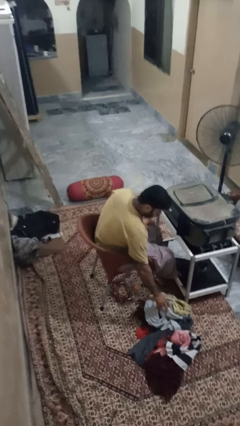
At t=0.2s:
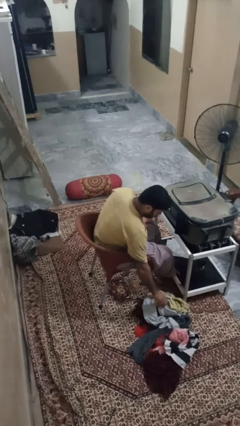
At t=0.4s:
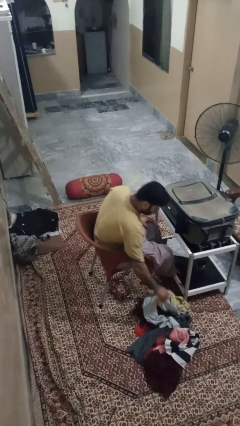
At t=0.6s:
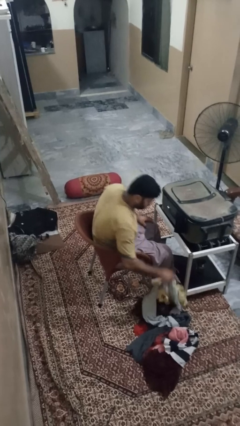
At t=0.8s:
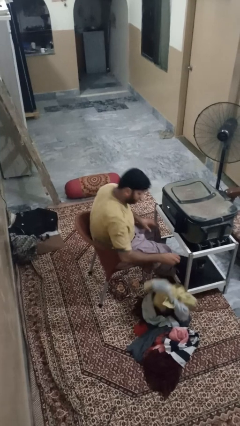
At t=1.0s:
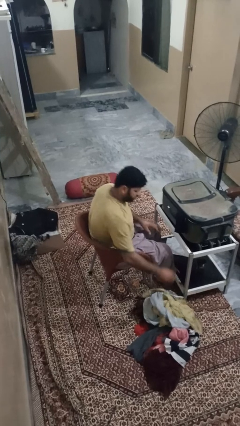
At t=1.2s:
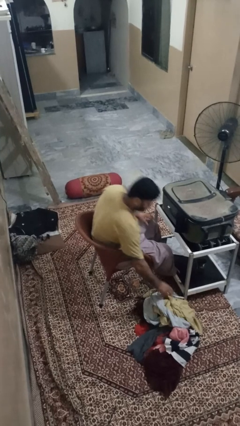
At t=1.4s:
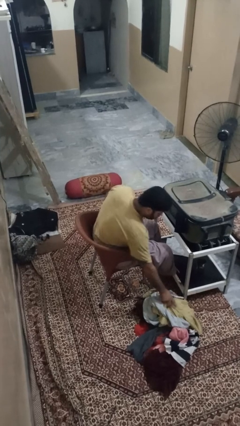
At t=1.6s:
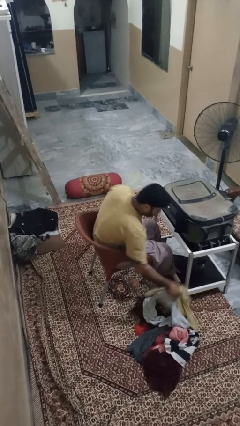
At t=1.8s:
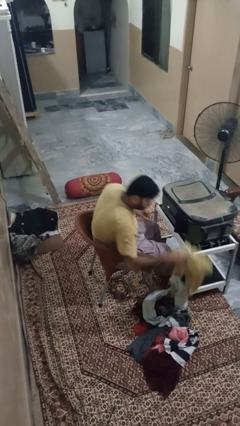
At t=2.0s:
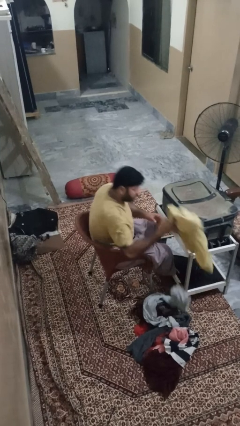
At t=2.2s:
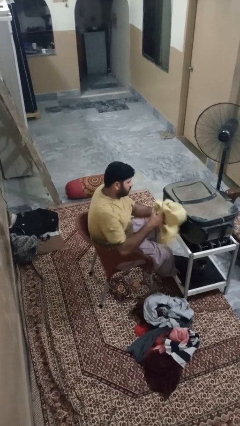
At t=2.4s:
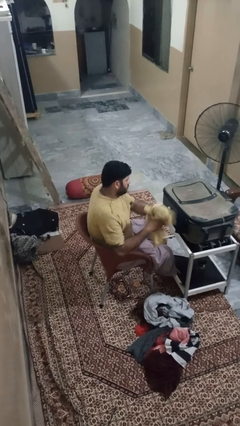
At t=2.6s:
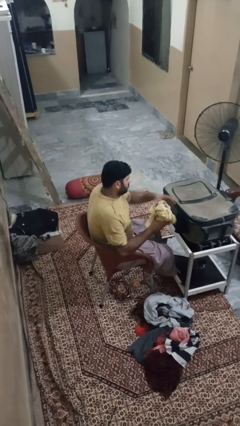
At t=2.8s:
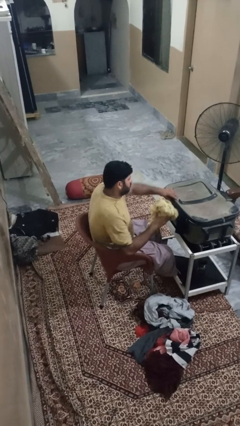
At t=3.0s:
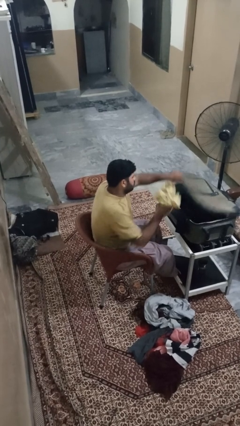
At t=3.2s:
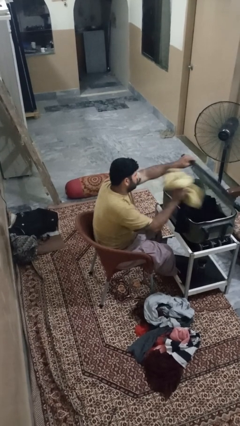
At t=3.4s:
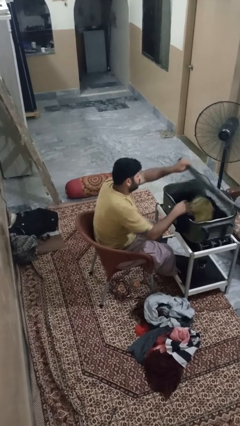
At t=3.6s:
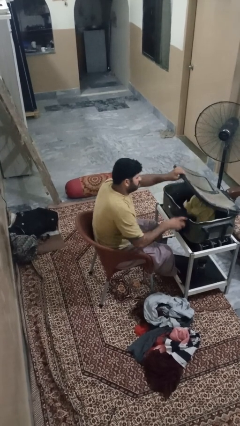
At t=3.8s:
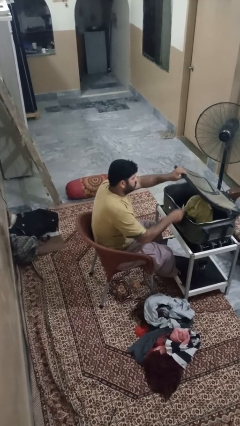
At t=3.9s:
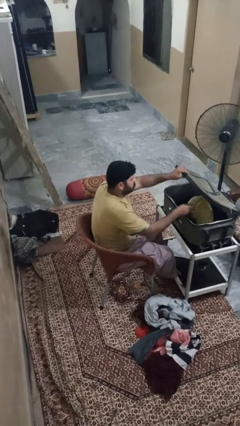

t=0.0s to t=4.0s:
person loads clothes into suitcase

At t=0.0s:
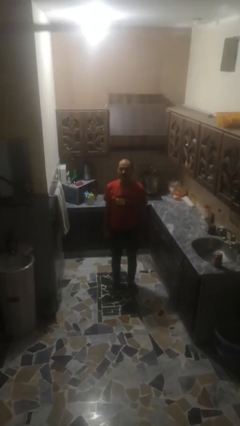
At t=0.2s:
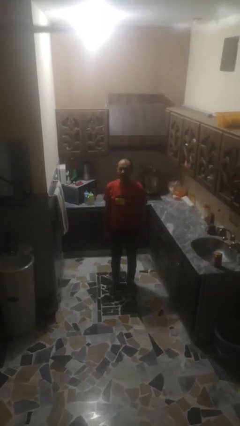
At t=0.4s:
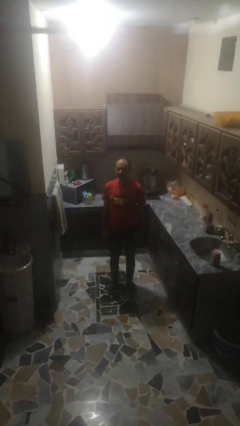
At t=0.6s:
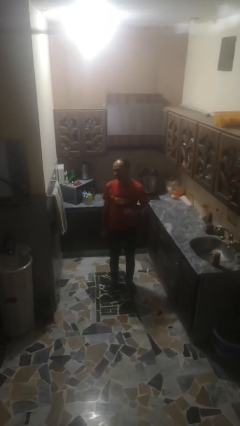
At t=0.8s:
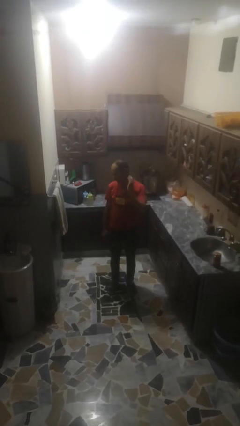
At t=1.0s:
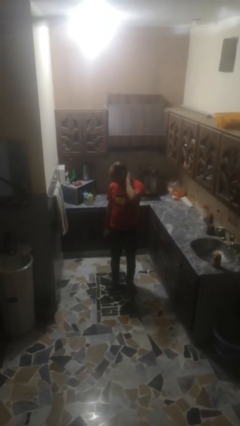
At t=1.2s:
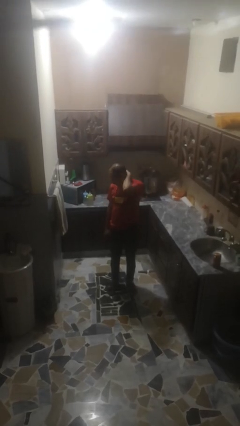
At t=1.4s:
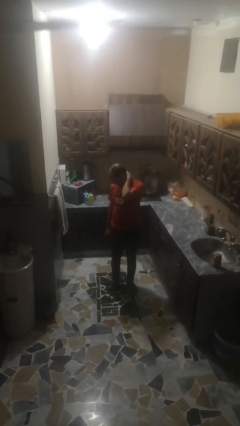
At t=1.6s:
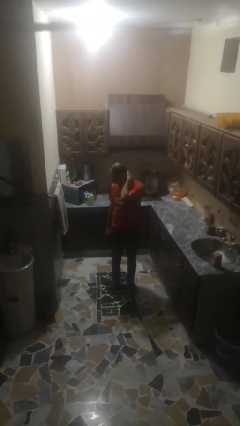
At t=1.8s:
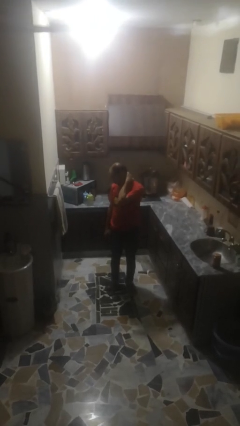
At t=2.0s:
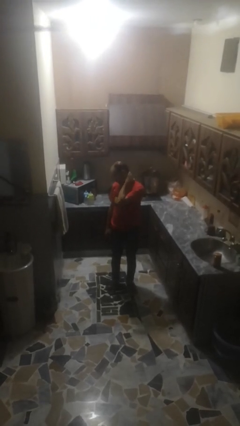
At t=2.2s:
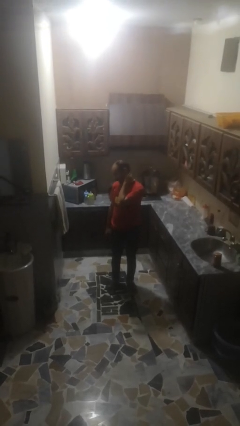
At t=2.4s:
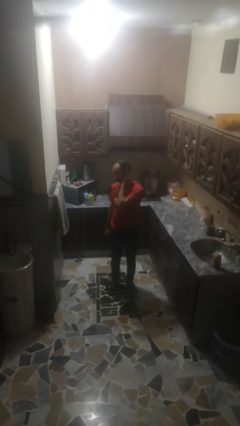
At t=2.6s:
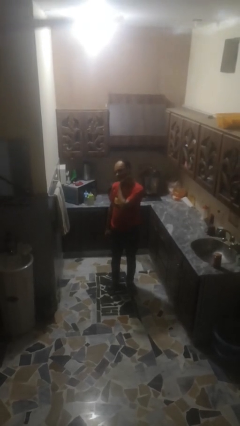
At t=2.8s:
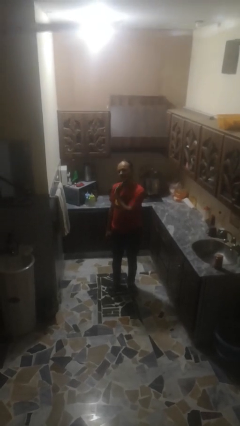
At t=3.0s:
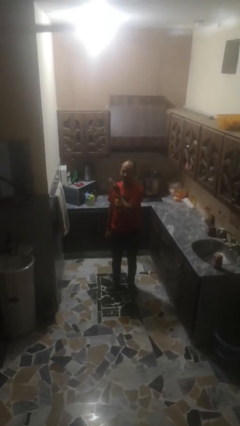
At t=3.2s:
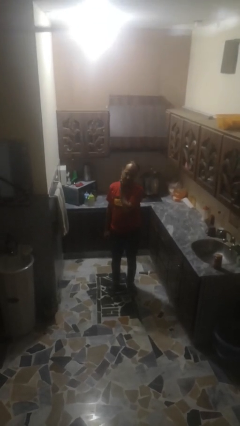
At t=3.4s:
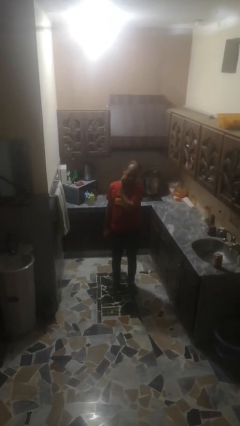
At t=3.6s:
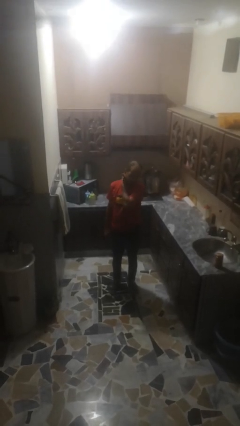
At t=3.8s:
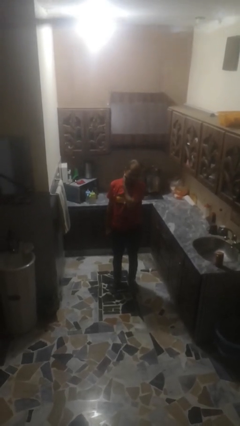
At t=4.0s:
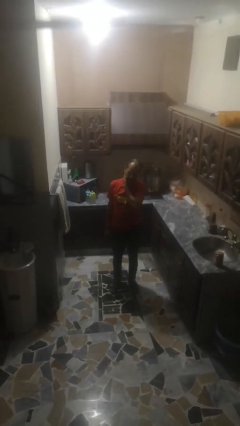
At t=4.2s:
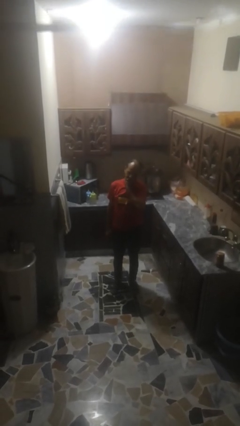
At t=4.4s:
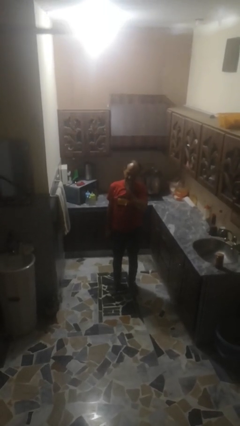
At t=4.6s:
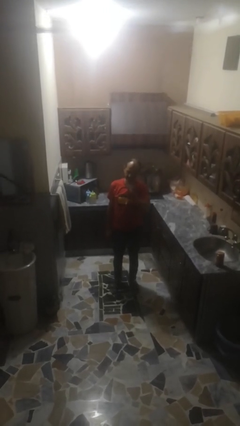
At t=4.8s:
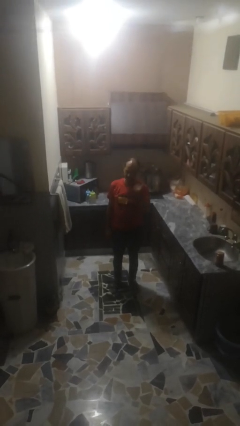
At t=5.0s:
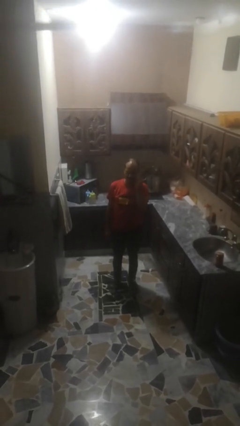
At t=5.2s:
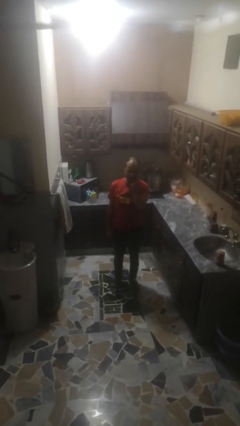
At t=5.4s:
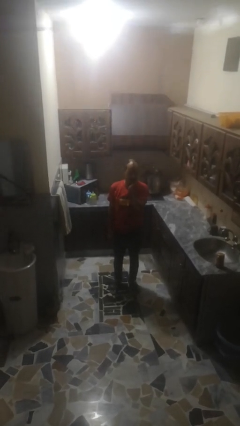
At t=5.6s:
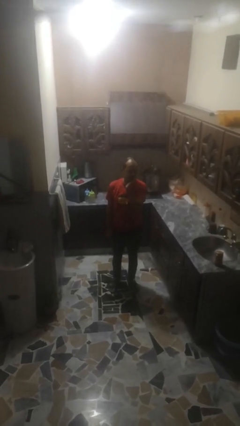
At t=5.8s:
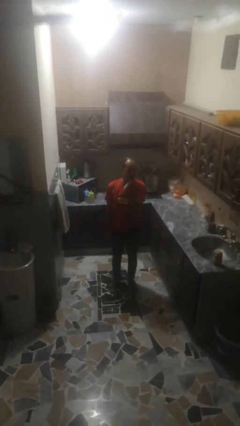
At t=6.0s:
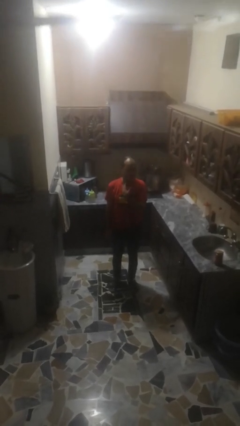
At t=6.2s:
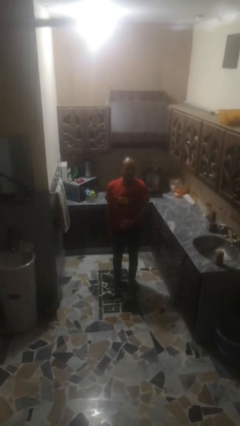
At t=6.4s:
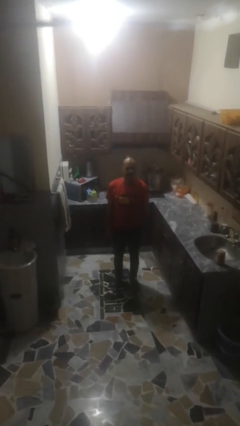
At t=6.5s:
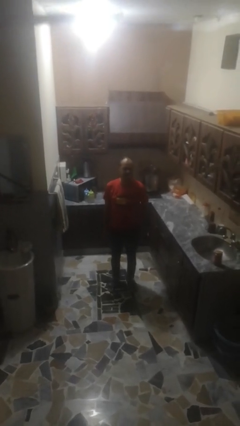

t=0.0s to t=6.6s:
person rubs neck

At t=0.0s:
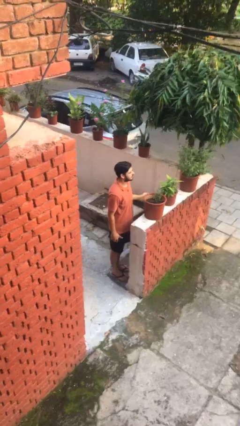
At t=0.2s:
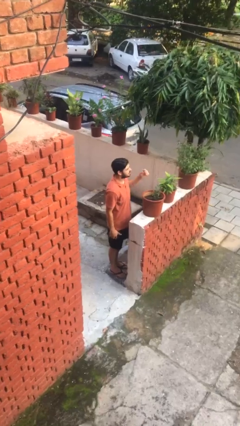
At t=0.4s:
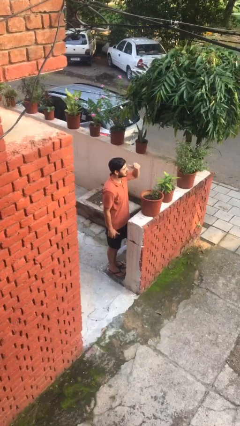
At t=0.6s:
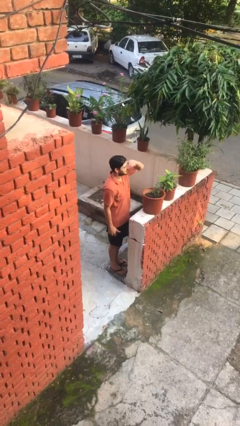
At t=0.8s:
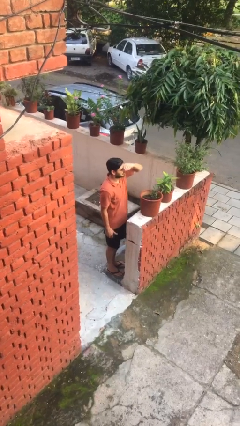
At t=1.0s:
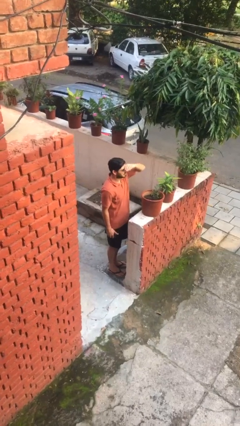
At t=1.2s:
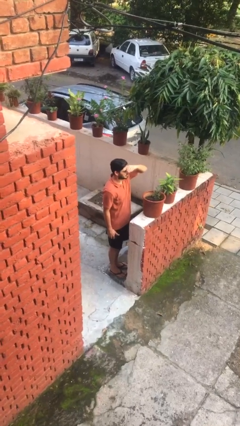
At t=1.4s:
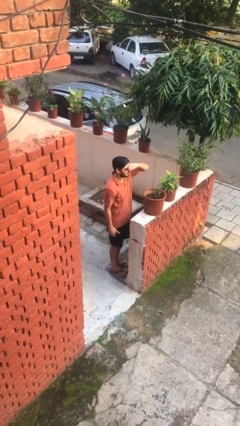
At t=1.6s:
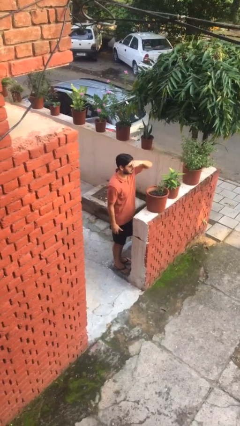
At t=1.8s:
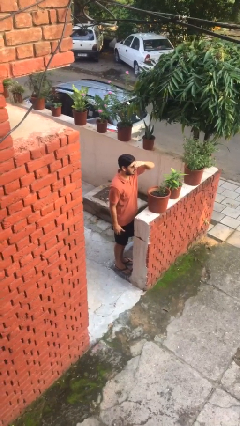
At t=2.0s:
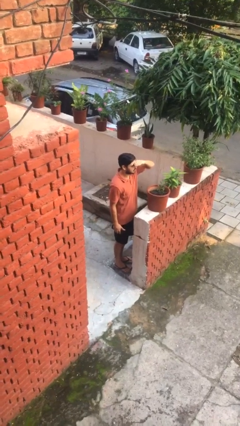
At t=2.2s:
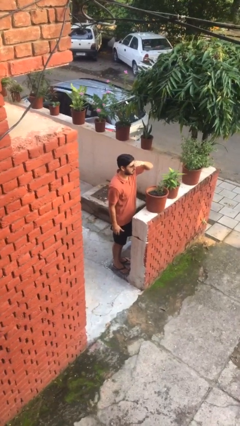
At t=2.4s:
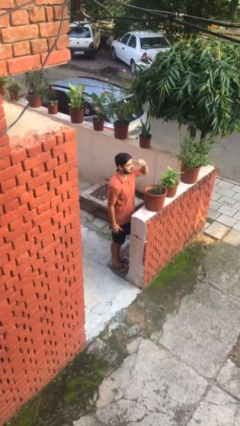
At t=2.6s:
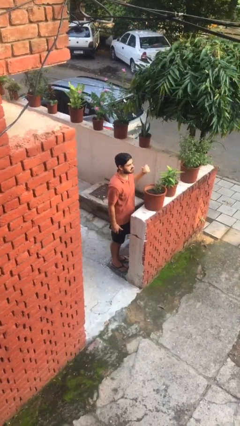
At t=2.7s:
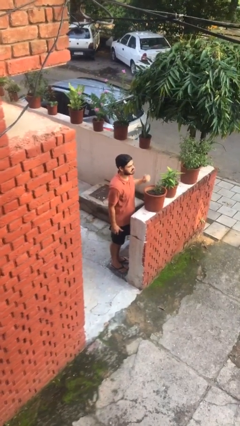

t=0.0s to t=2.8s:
person shades eyes

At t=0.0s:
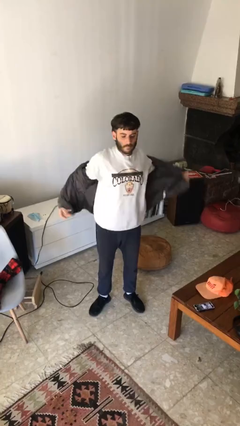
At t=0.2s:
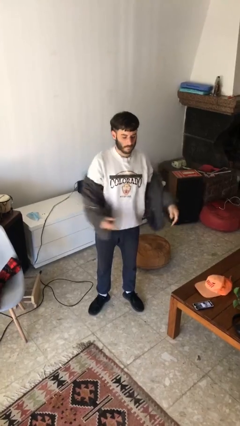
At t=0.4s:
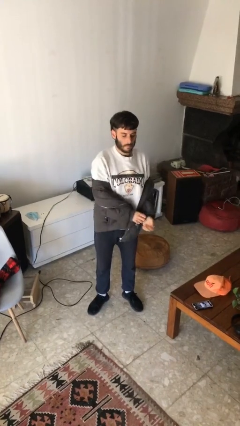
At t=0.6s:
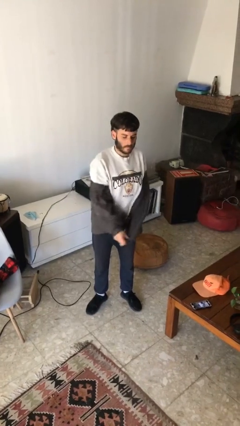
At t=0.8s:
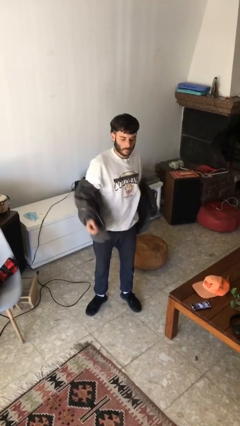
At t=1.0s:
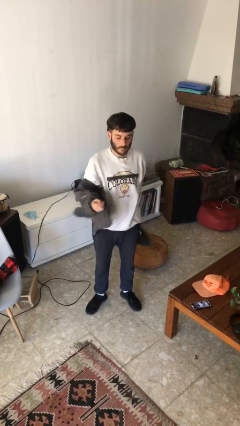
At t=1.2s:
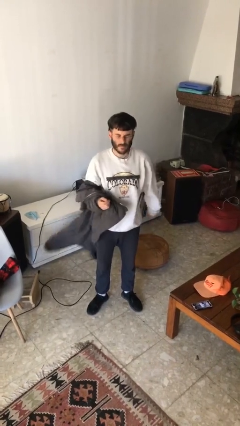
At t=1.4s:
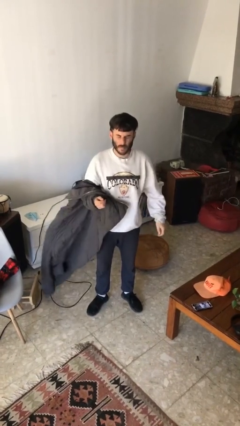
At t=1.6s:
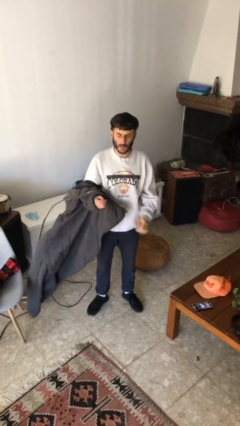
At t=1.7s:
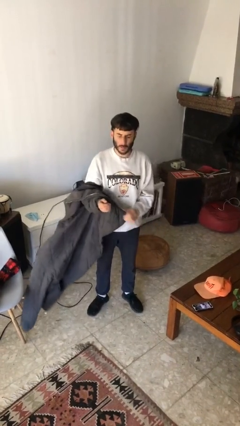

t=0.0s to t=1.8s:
person takes off jacket

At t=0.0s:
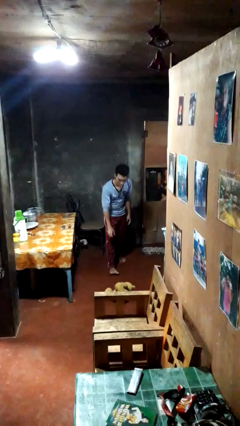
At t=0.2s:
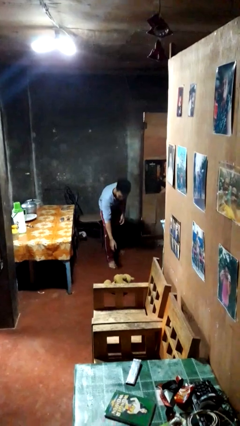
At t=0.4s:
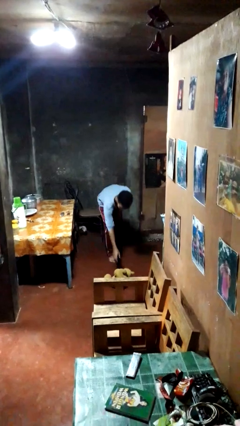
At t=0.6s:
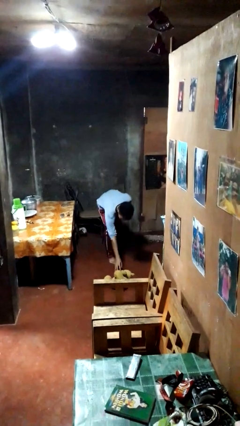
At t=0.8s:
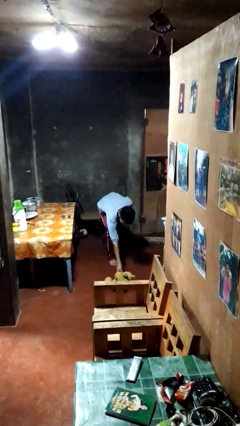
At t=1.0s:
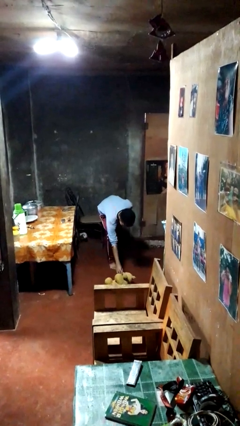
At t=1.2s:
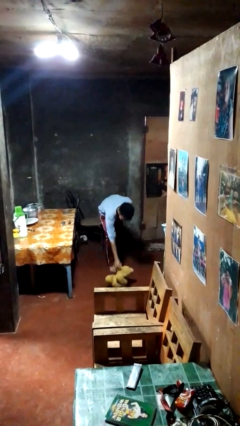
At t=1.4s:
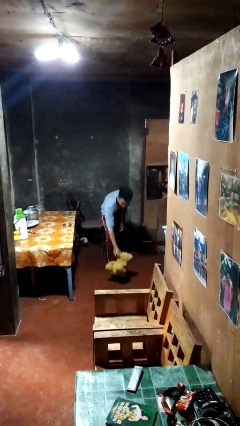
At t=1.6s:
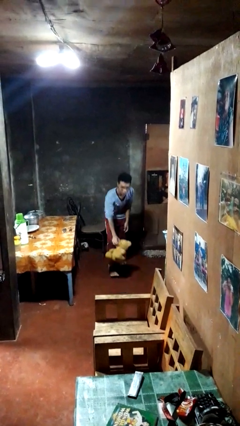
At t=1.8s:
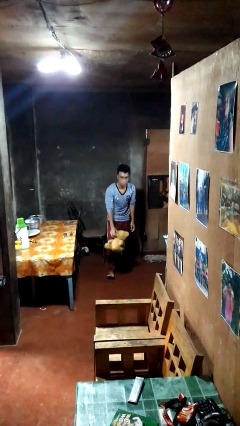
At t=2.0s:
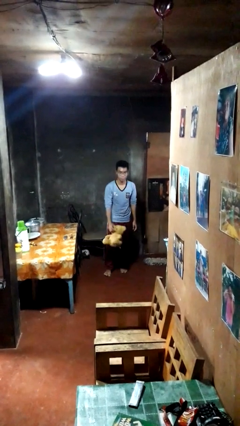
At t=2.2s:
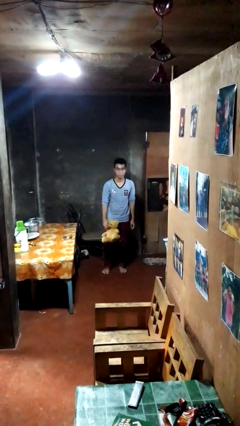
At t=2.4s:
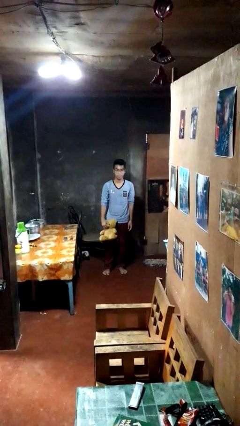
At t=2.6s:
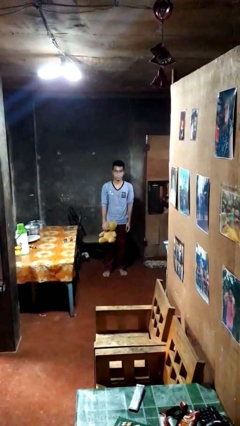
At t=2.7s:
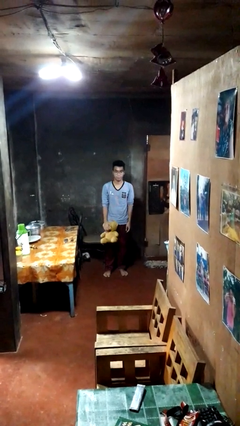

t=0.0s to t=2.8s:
person picks up object from floor
